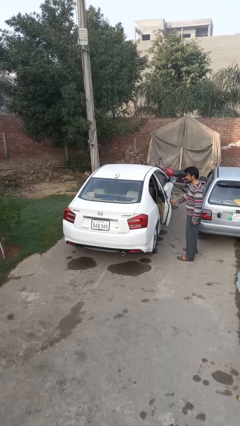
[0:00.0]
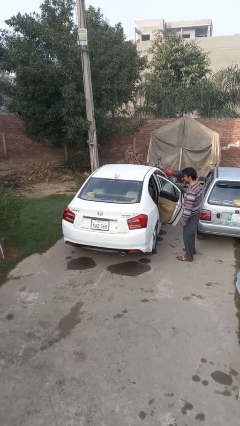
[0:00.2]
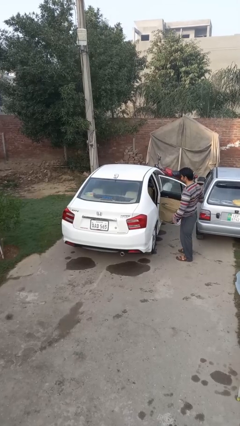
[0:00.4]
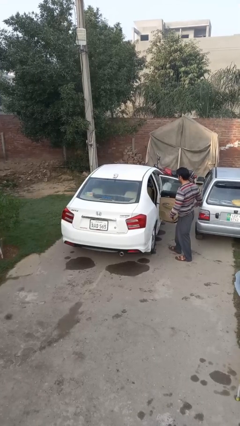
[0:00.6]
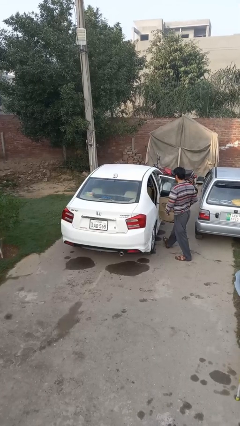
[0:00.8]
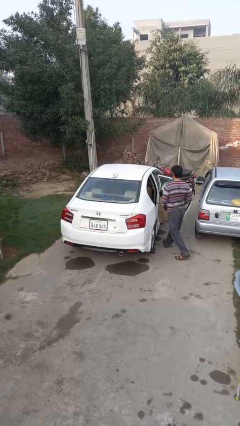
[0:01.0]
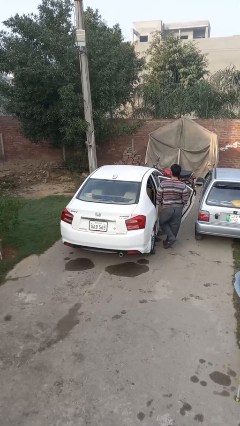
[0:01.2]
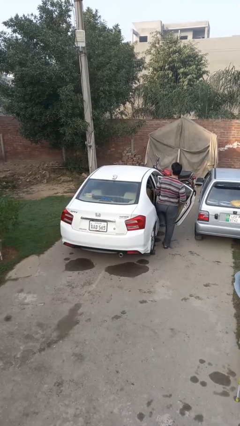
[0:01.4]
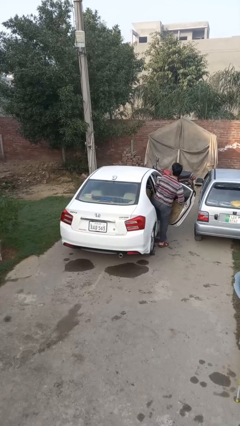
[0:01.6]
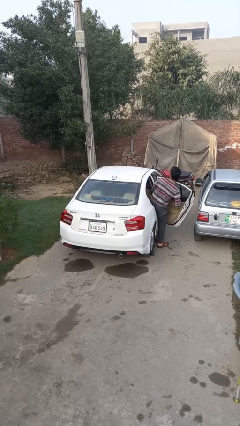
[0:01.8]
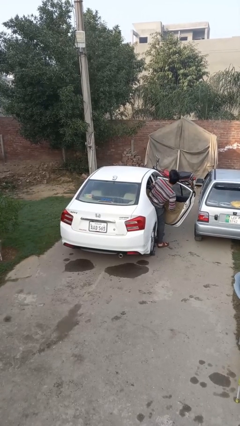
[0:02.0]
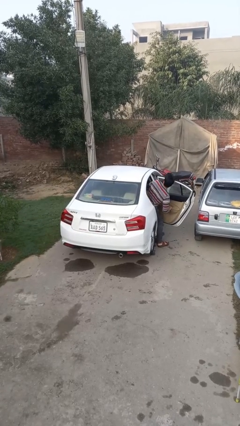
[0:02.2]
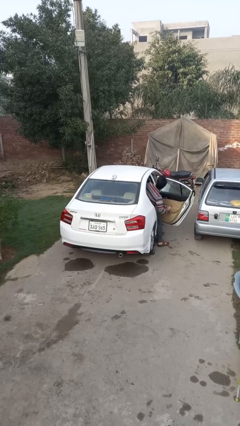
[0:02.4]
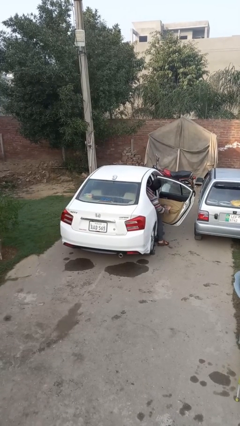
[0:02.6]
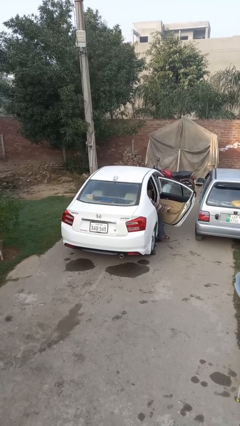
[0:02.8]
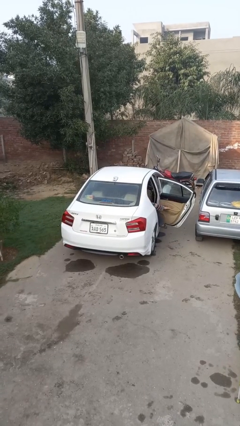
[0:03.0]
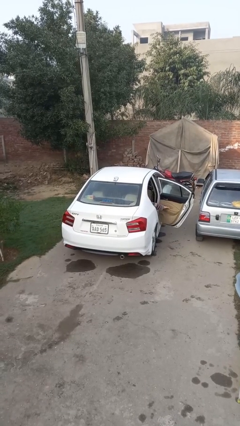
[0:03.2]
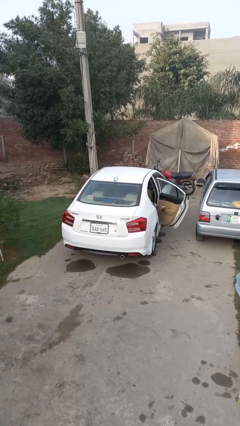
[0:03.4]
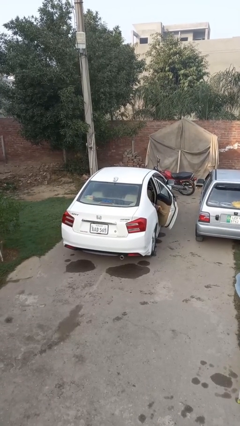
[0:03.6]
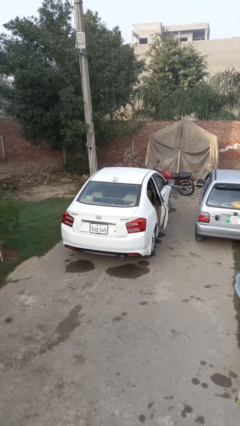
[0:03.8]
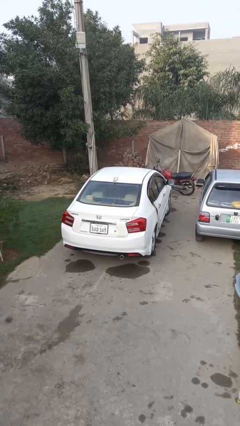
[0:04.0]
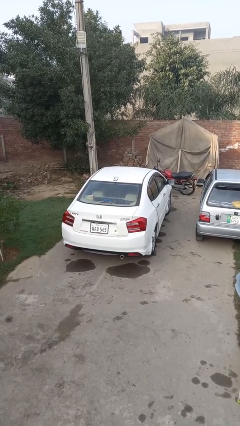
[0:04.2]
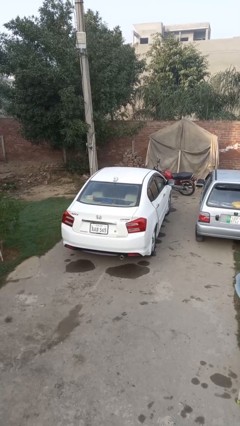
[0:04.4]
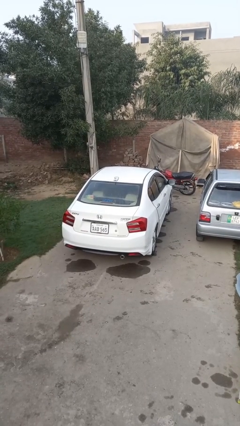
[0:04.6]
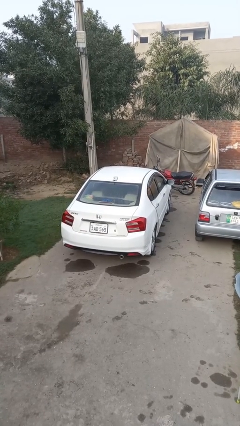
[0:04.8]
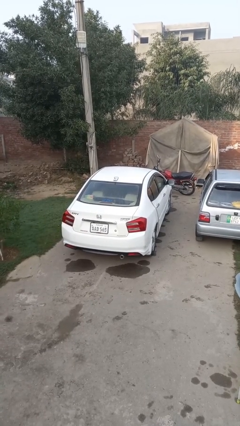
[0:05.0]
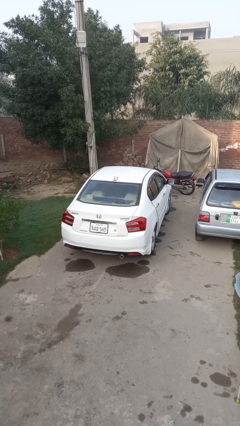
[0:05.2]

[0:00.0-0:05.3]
car picks up person

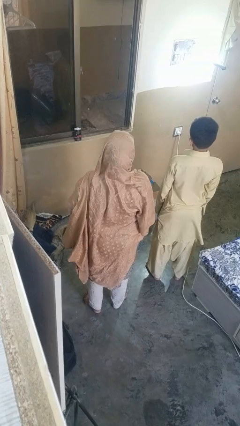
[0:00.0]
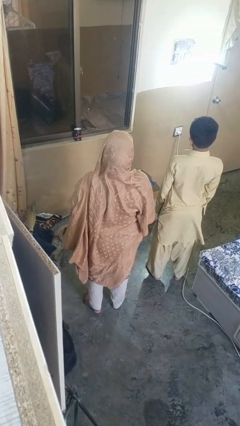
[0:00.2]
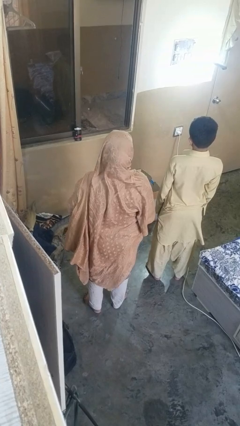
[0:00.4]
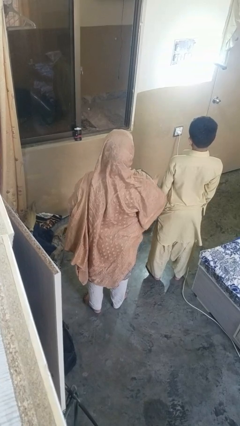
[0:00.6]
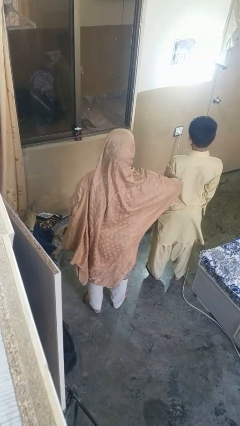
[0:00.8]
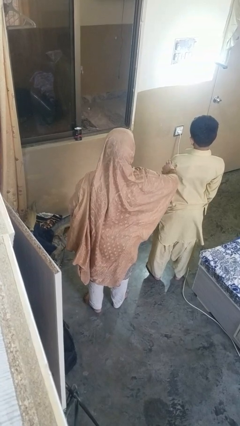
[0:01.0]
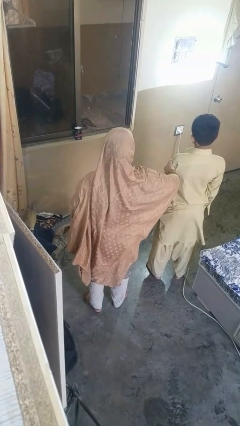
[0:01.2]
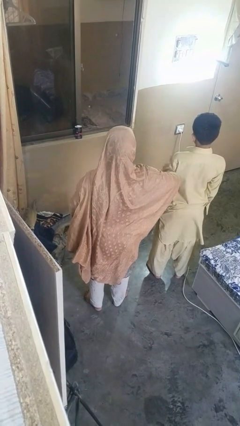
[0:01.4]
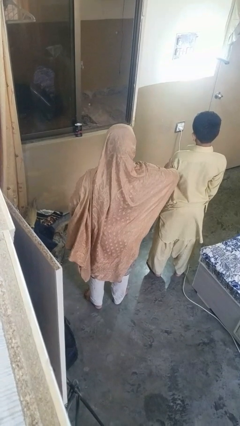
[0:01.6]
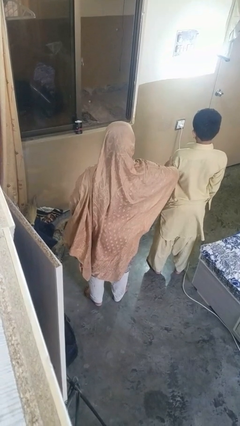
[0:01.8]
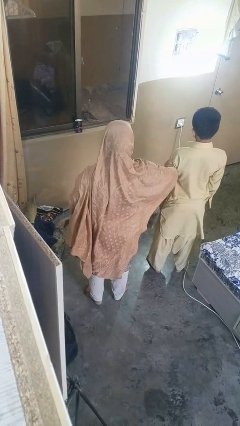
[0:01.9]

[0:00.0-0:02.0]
person grabs person by bicep

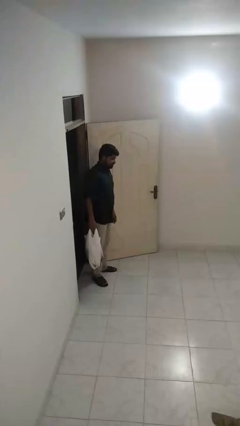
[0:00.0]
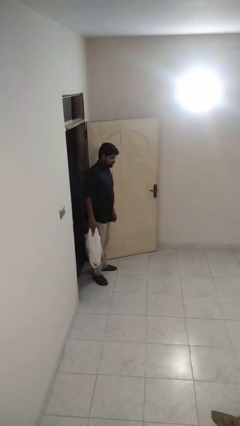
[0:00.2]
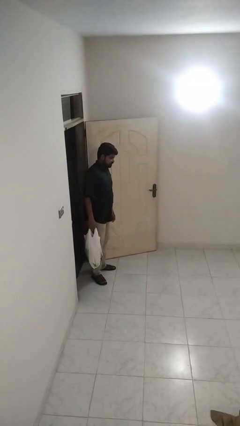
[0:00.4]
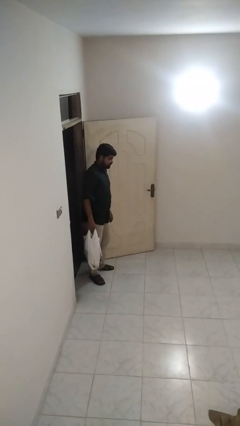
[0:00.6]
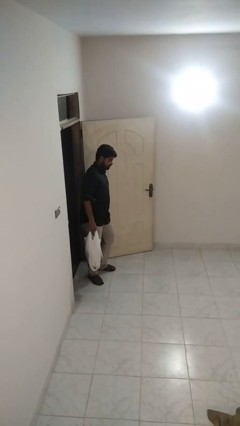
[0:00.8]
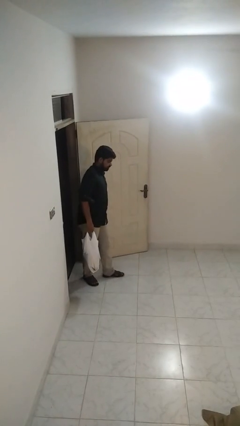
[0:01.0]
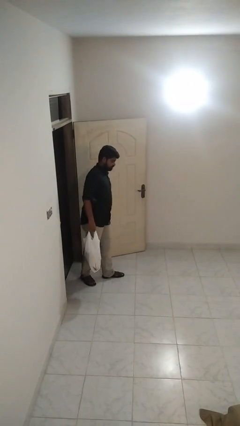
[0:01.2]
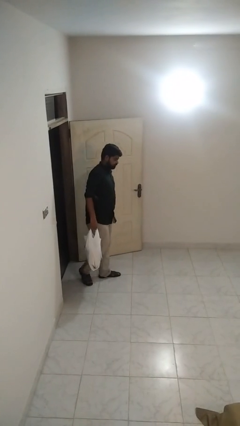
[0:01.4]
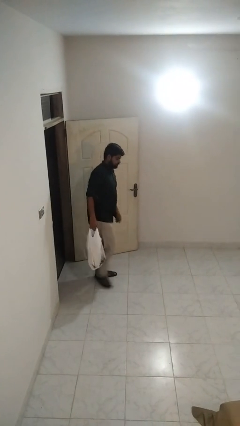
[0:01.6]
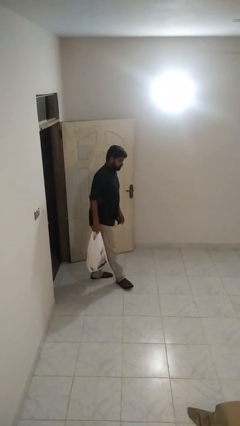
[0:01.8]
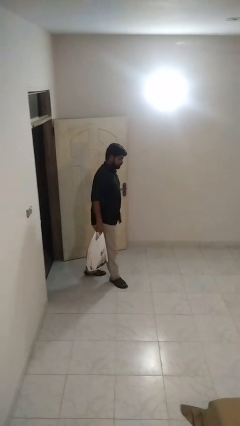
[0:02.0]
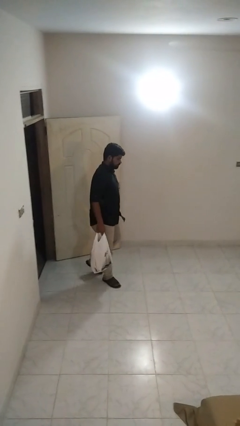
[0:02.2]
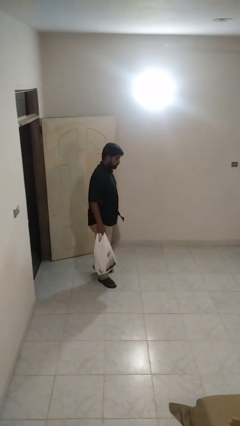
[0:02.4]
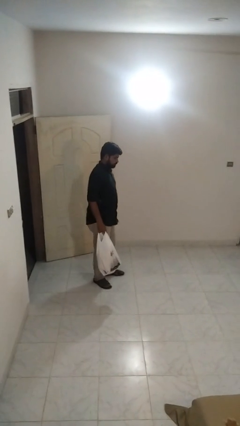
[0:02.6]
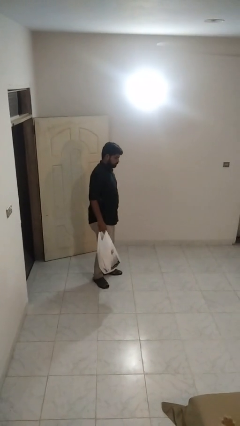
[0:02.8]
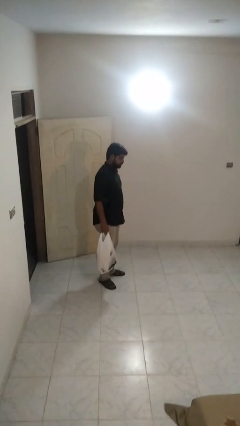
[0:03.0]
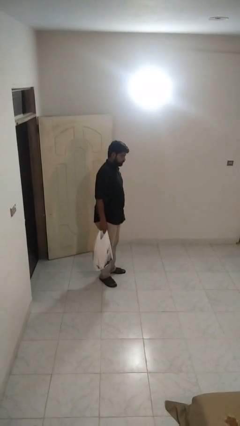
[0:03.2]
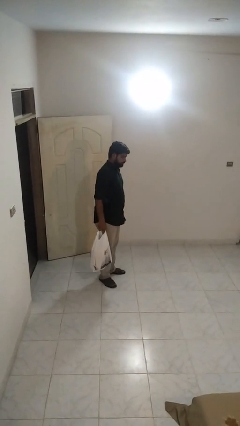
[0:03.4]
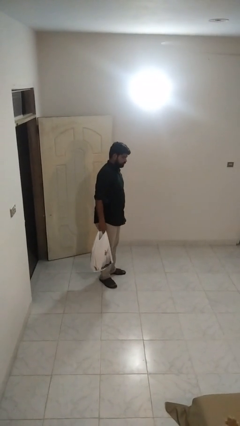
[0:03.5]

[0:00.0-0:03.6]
person carries groceries

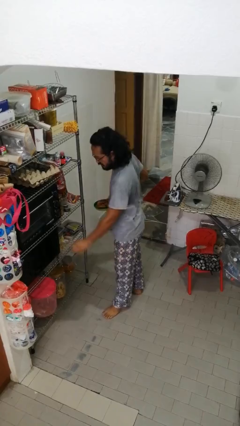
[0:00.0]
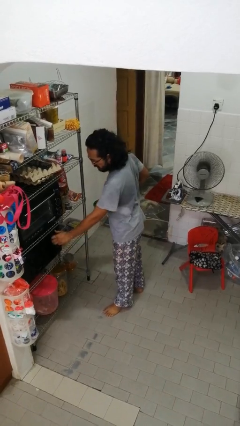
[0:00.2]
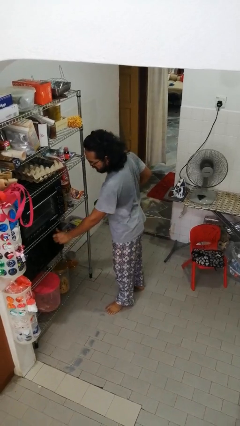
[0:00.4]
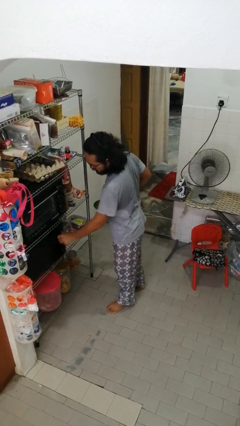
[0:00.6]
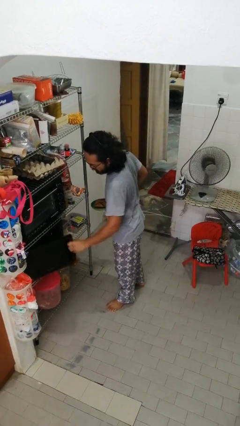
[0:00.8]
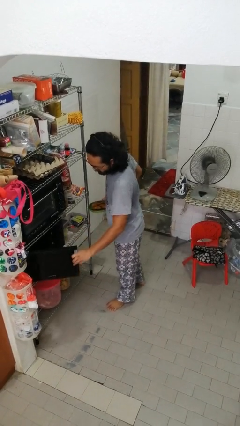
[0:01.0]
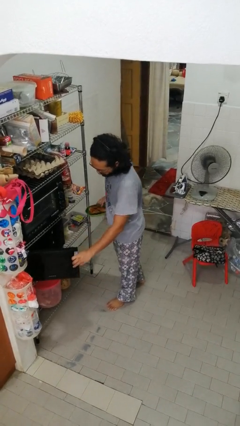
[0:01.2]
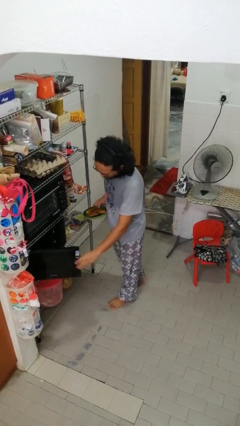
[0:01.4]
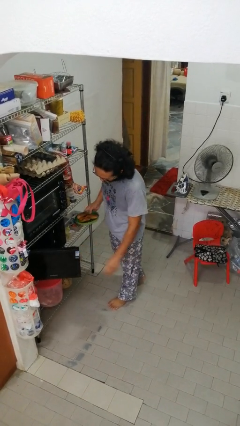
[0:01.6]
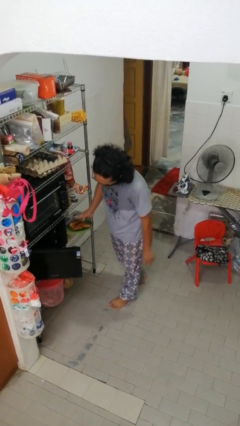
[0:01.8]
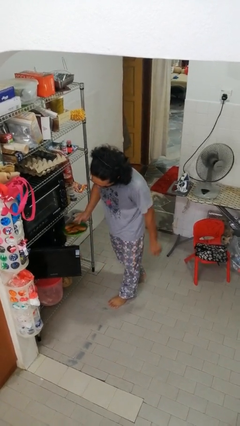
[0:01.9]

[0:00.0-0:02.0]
person opens microwave

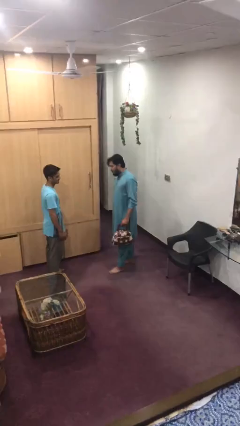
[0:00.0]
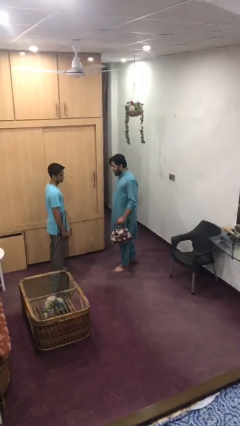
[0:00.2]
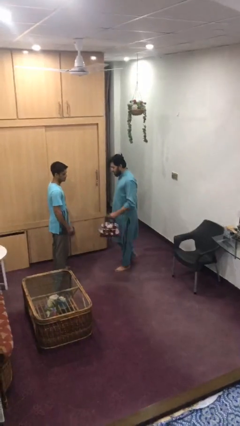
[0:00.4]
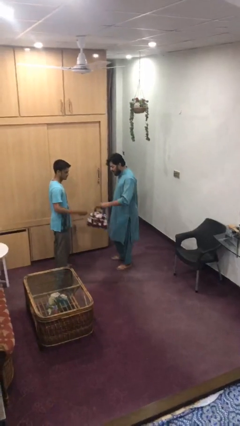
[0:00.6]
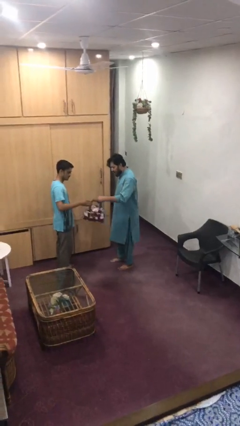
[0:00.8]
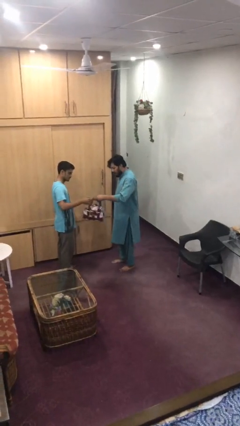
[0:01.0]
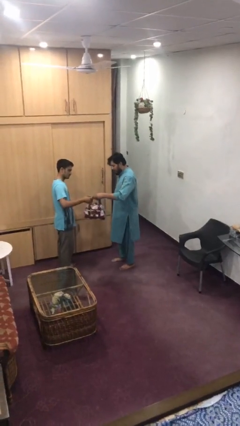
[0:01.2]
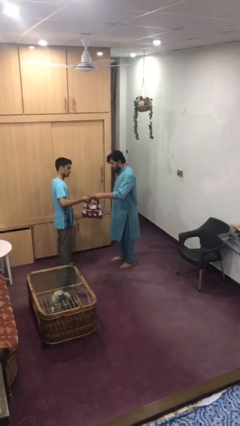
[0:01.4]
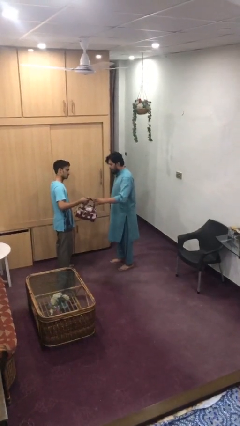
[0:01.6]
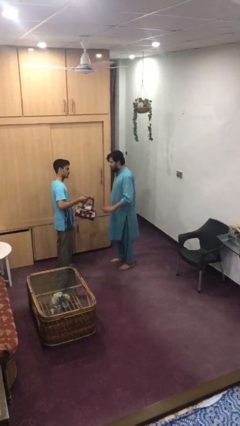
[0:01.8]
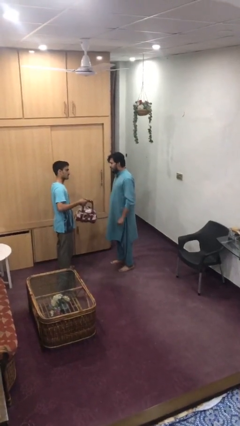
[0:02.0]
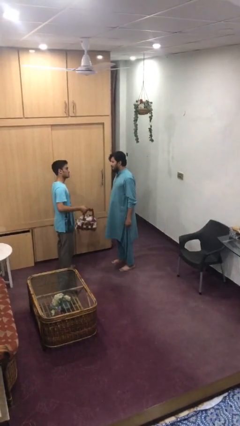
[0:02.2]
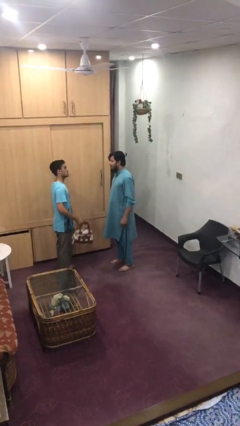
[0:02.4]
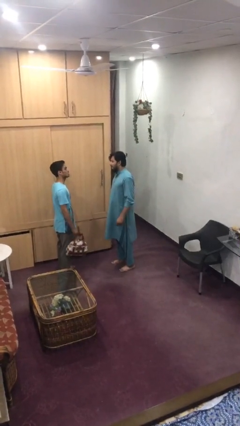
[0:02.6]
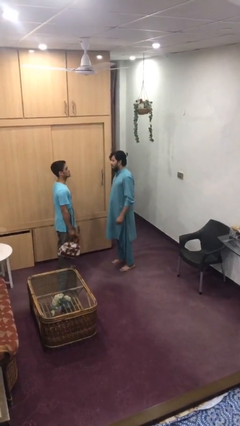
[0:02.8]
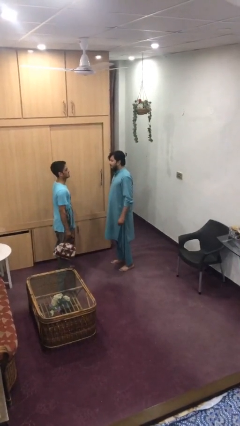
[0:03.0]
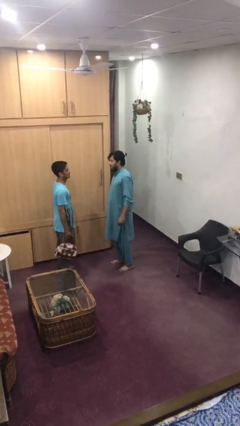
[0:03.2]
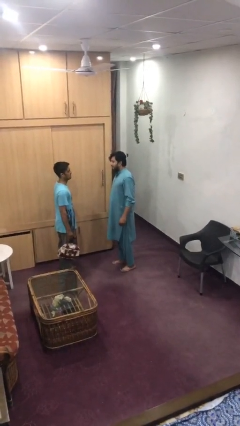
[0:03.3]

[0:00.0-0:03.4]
person transfers object to person

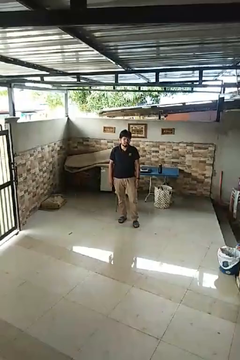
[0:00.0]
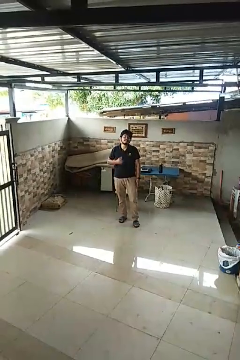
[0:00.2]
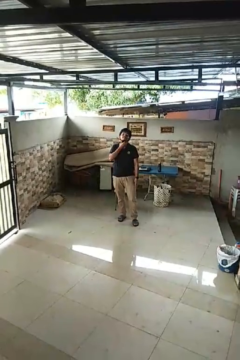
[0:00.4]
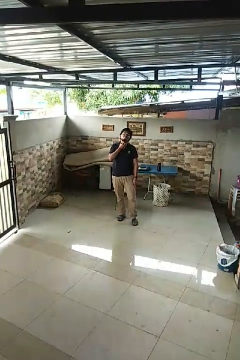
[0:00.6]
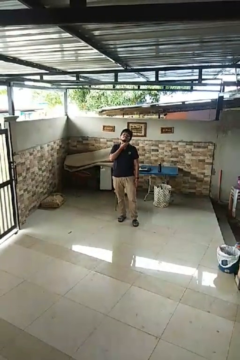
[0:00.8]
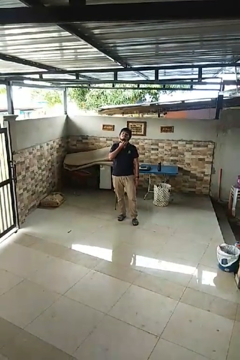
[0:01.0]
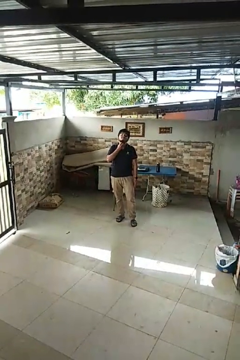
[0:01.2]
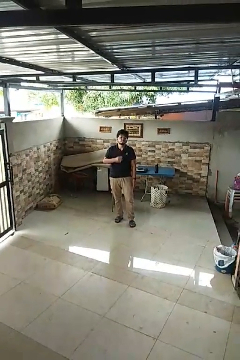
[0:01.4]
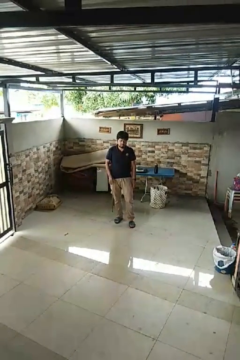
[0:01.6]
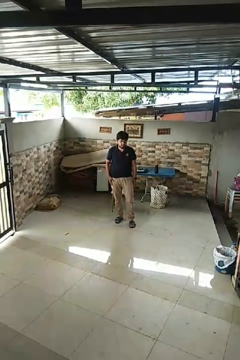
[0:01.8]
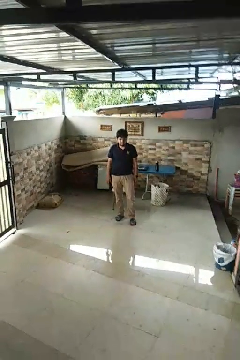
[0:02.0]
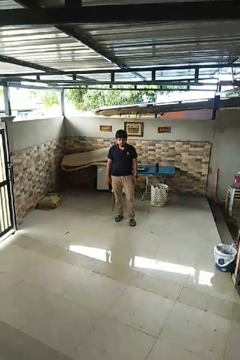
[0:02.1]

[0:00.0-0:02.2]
person scratches face
